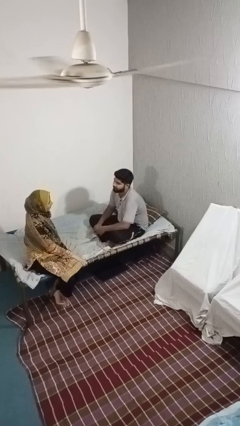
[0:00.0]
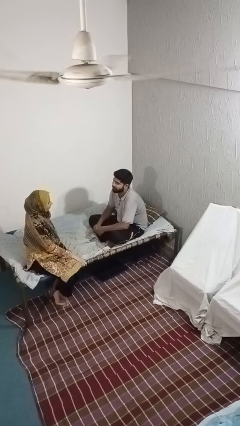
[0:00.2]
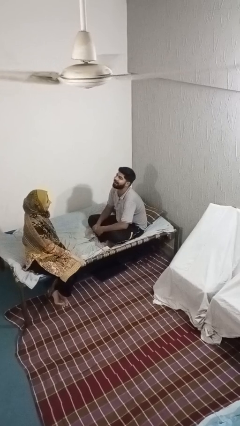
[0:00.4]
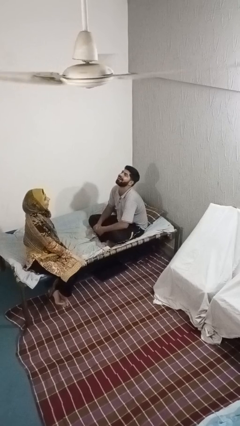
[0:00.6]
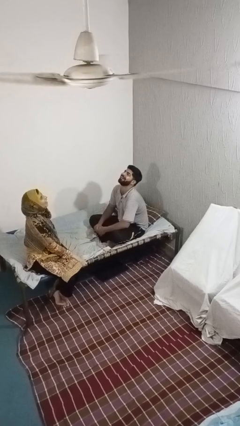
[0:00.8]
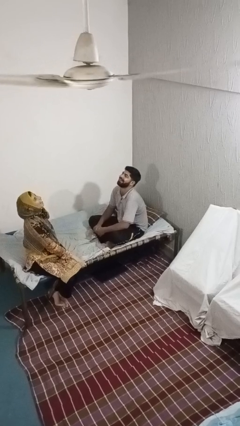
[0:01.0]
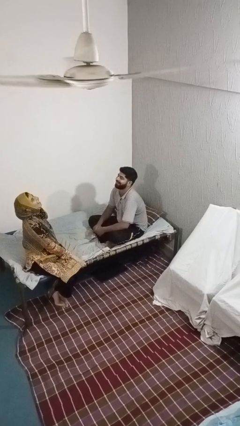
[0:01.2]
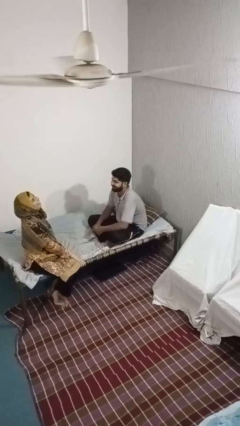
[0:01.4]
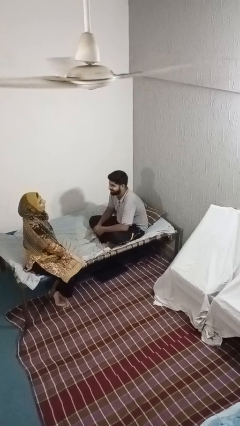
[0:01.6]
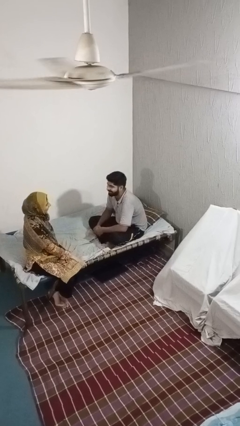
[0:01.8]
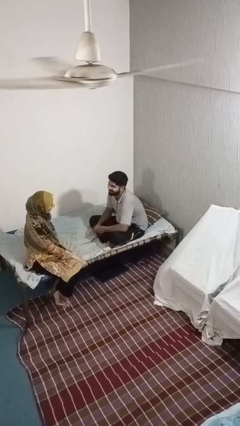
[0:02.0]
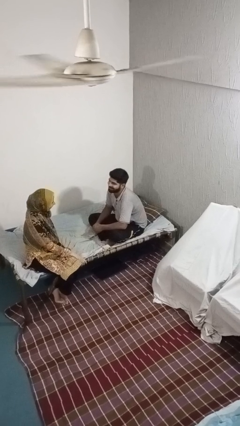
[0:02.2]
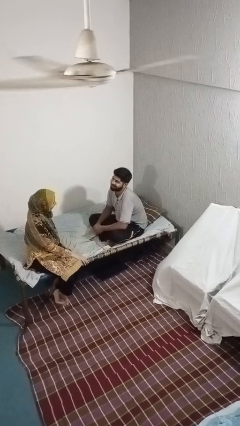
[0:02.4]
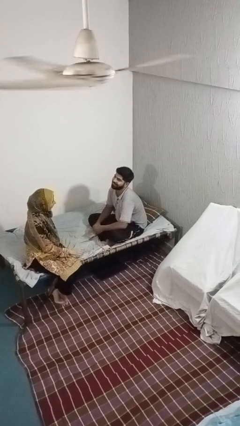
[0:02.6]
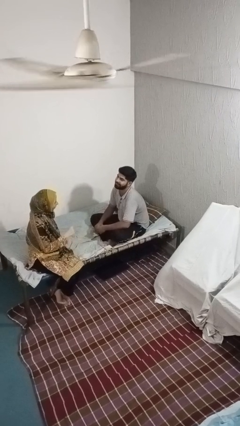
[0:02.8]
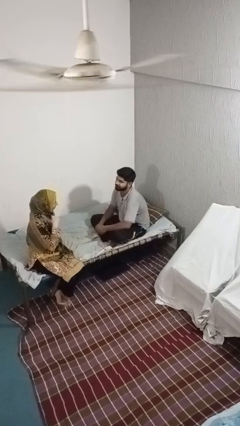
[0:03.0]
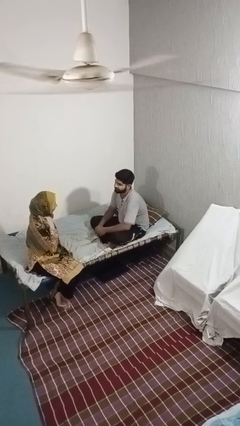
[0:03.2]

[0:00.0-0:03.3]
person laughs with person

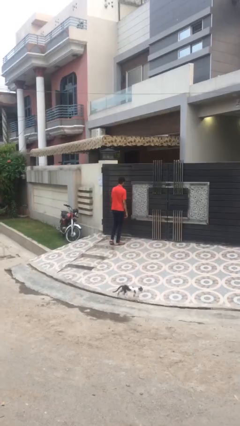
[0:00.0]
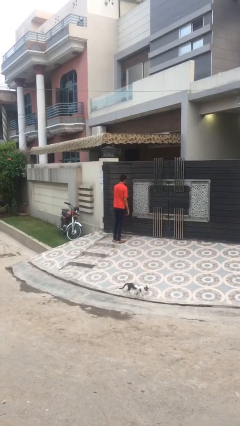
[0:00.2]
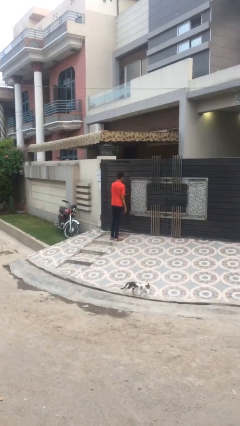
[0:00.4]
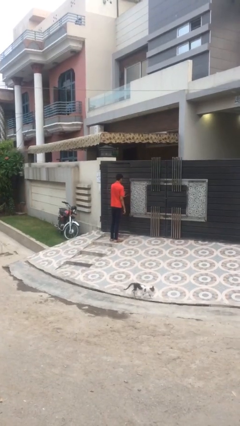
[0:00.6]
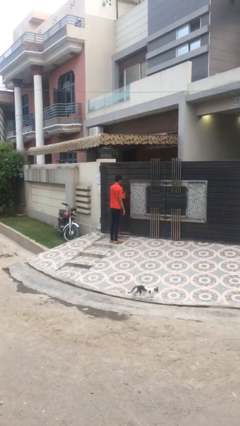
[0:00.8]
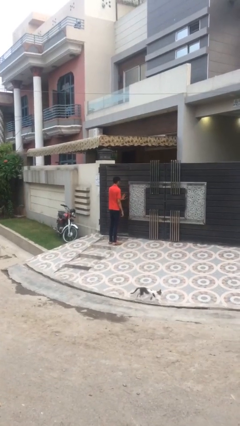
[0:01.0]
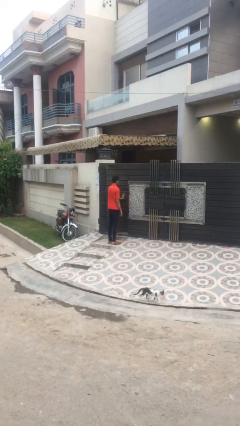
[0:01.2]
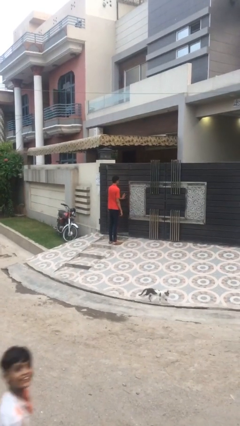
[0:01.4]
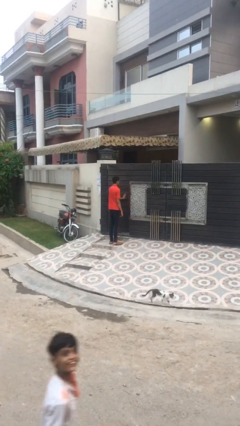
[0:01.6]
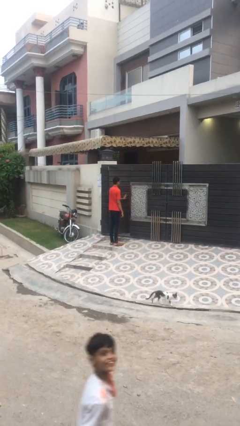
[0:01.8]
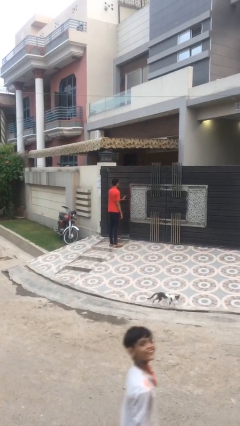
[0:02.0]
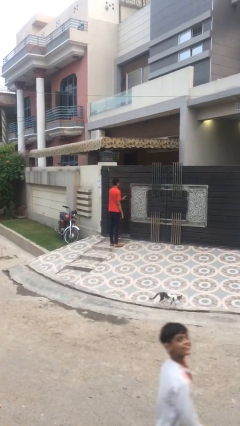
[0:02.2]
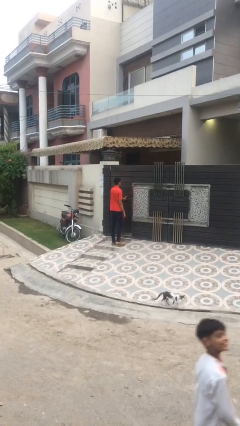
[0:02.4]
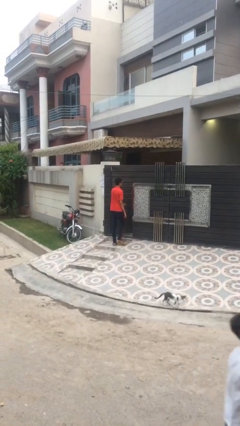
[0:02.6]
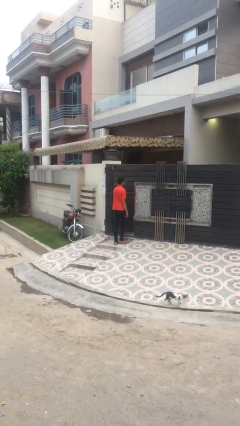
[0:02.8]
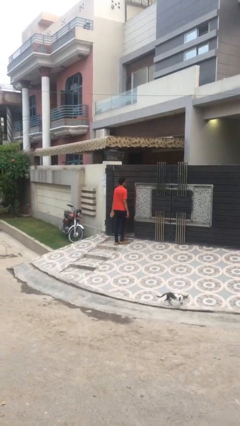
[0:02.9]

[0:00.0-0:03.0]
person opens facility door

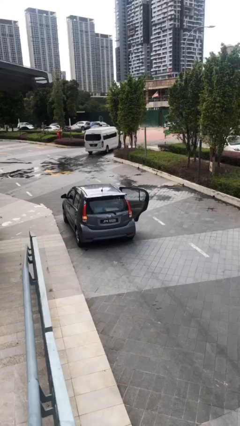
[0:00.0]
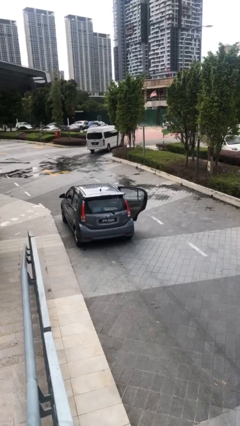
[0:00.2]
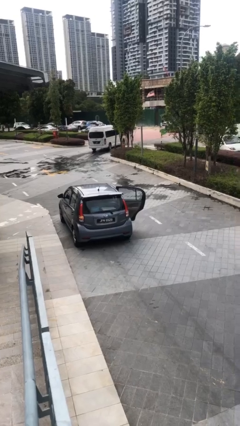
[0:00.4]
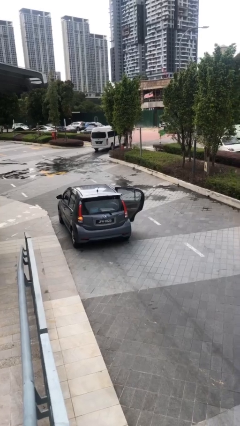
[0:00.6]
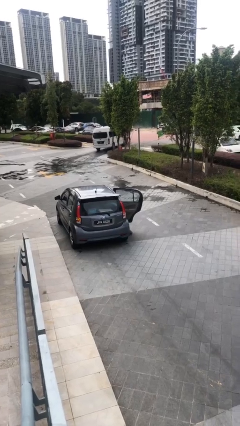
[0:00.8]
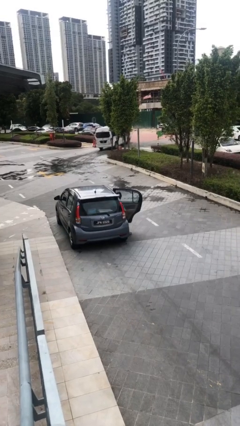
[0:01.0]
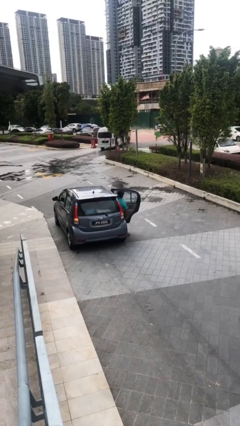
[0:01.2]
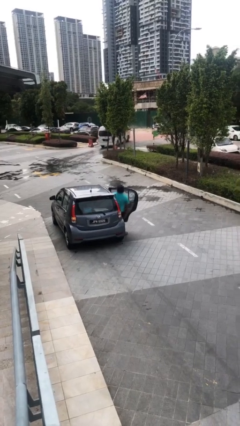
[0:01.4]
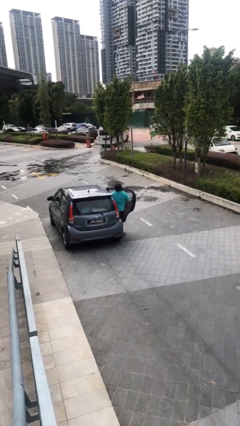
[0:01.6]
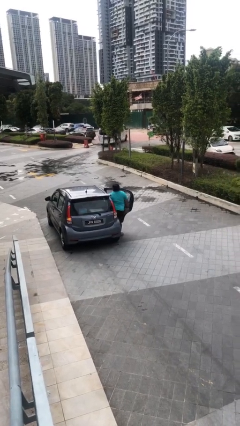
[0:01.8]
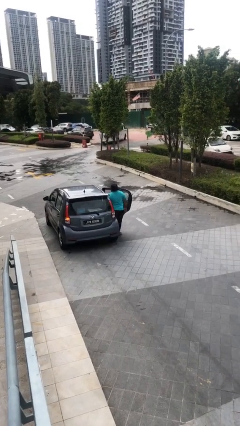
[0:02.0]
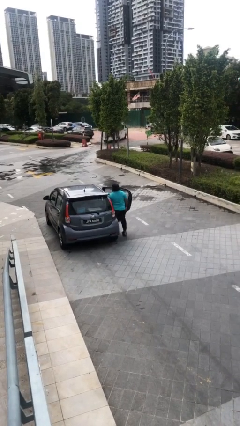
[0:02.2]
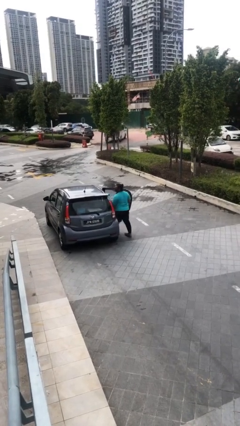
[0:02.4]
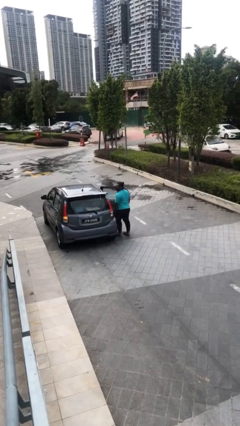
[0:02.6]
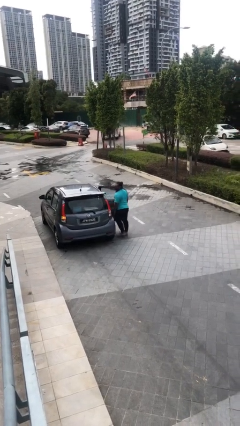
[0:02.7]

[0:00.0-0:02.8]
person exits car

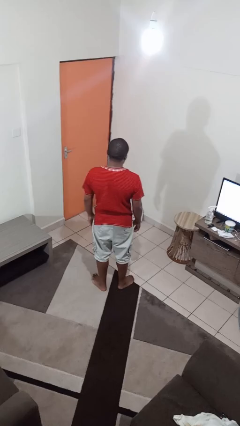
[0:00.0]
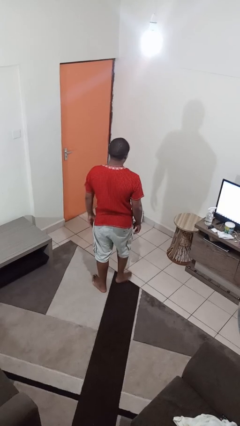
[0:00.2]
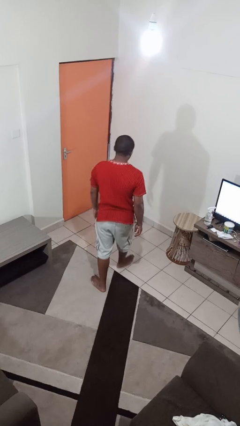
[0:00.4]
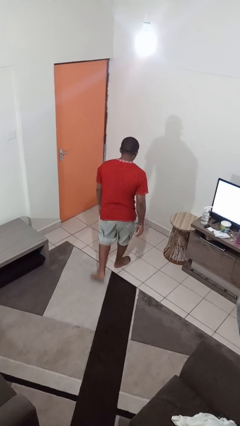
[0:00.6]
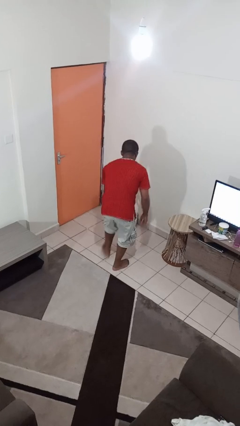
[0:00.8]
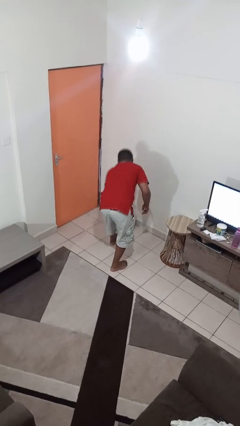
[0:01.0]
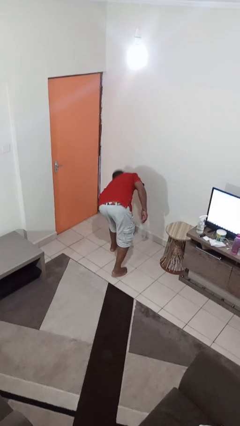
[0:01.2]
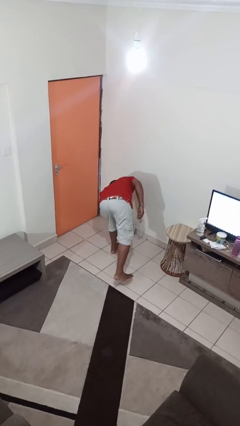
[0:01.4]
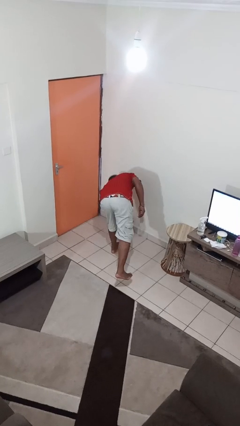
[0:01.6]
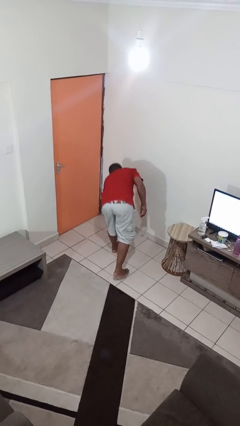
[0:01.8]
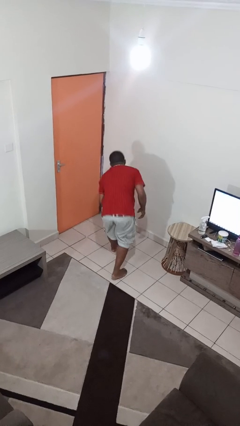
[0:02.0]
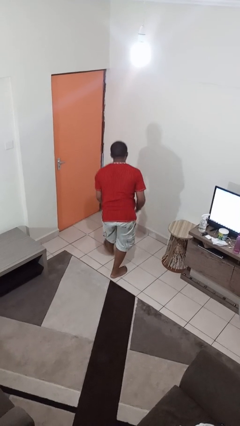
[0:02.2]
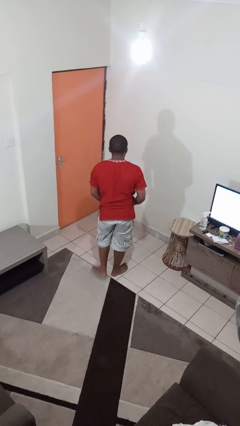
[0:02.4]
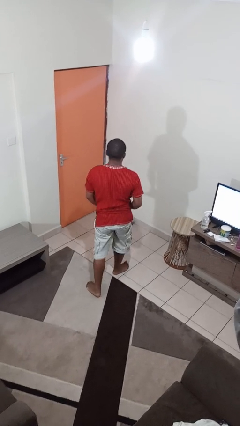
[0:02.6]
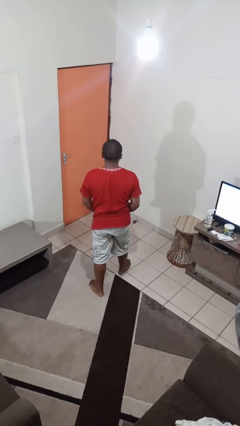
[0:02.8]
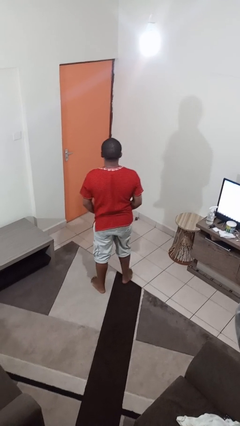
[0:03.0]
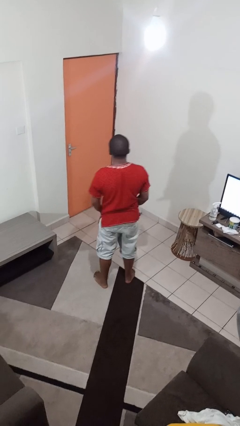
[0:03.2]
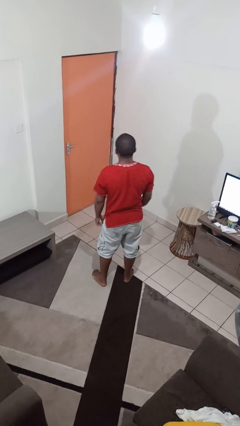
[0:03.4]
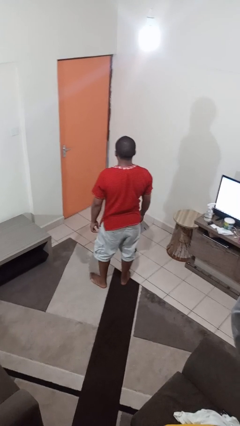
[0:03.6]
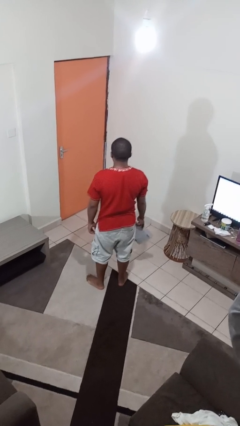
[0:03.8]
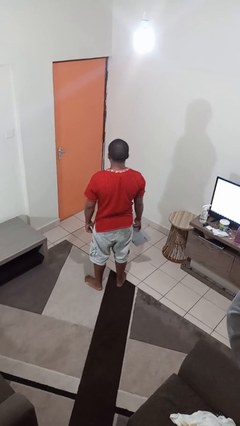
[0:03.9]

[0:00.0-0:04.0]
person picks up object from floor

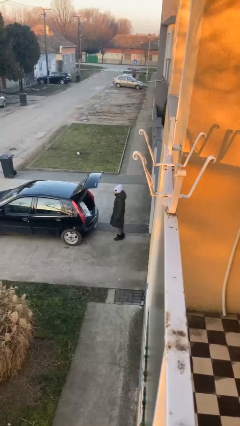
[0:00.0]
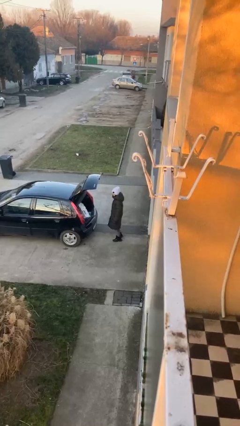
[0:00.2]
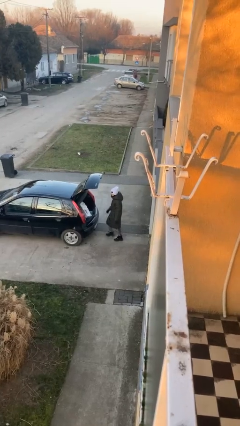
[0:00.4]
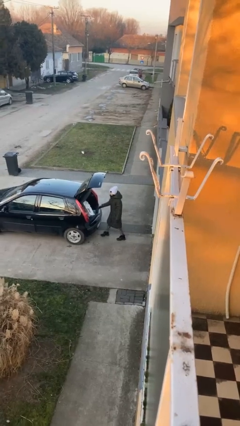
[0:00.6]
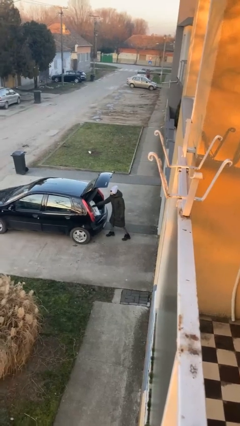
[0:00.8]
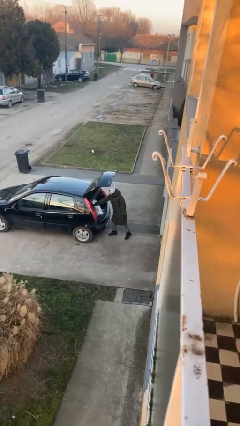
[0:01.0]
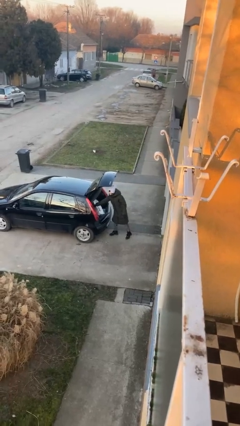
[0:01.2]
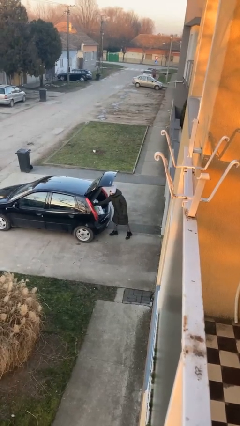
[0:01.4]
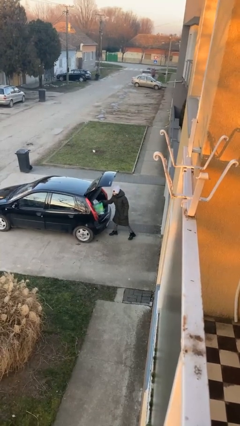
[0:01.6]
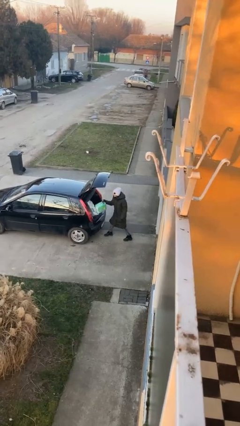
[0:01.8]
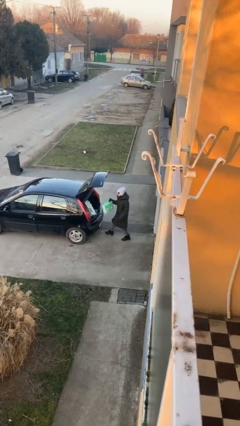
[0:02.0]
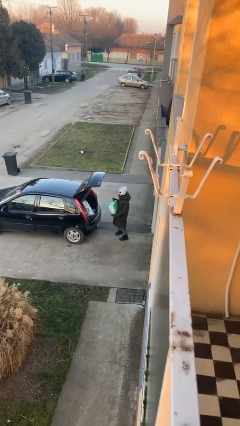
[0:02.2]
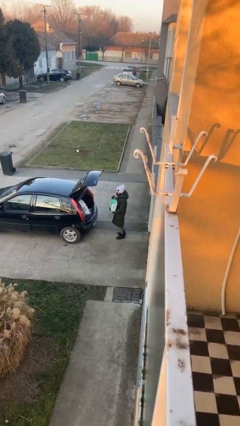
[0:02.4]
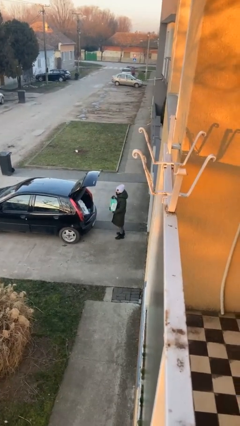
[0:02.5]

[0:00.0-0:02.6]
person unloads car

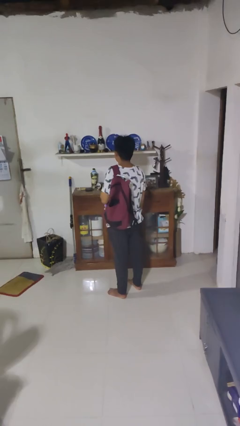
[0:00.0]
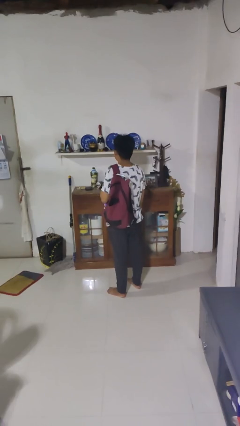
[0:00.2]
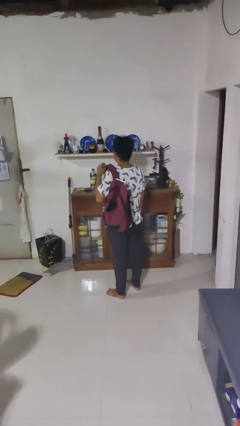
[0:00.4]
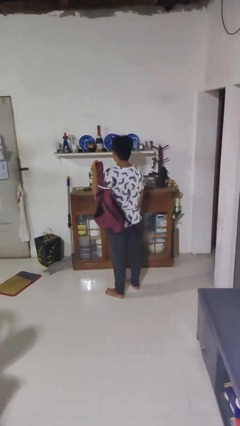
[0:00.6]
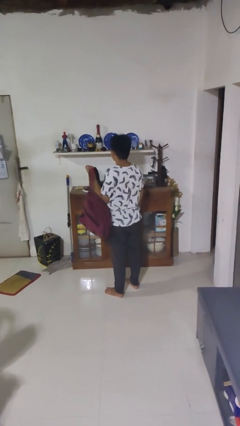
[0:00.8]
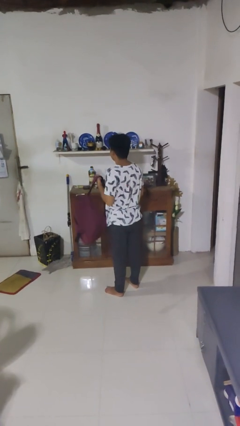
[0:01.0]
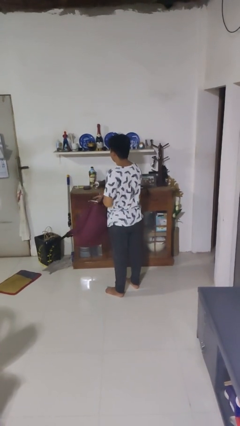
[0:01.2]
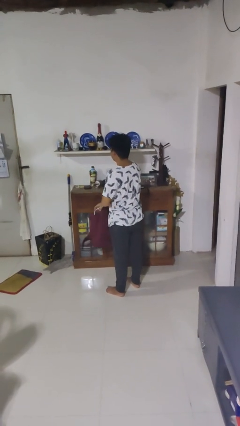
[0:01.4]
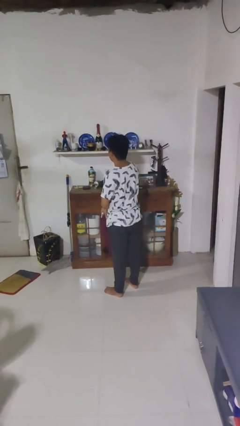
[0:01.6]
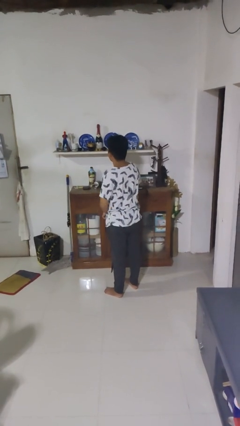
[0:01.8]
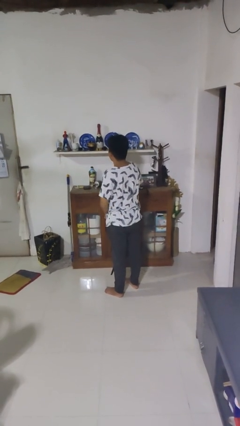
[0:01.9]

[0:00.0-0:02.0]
person takes off backpack
